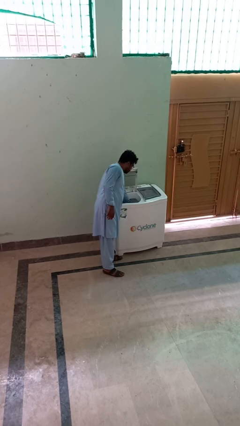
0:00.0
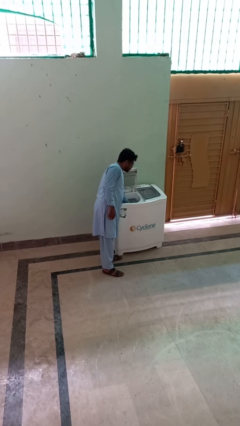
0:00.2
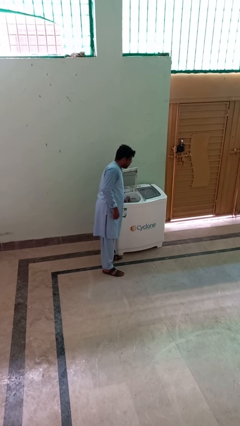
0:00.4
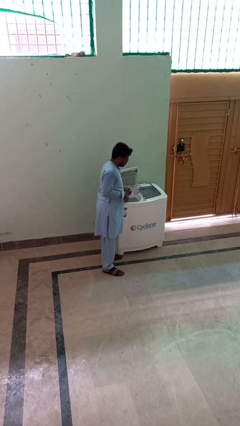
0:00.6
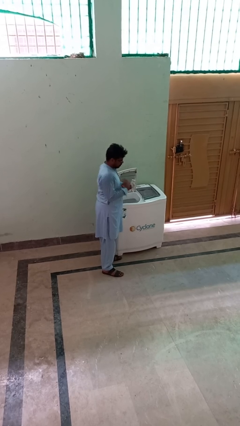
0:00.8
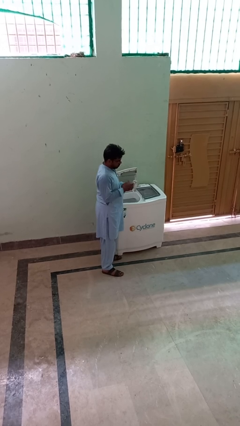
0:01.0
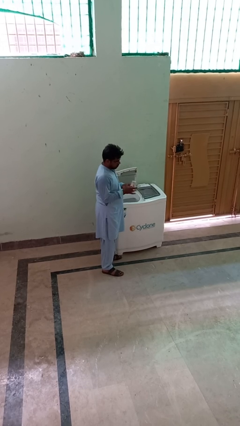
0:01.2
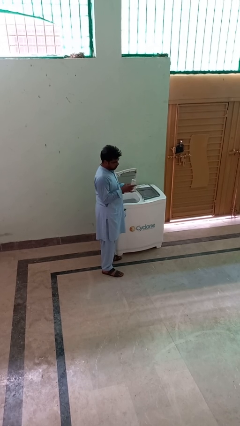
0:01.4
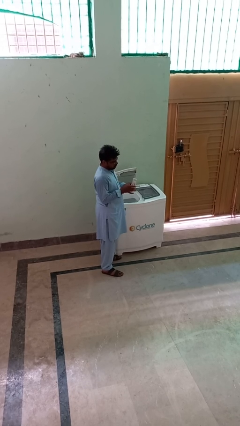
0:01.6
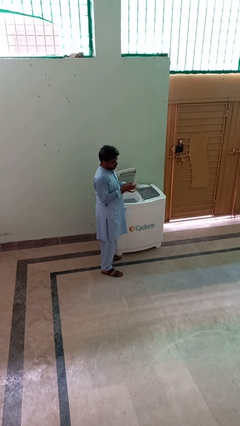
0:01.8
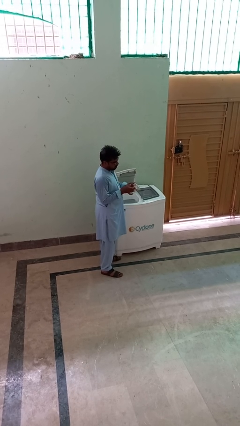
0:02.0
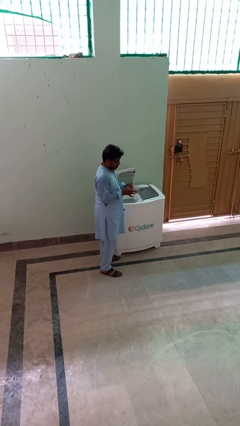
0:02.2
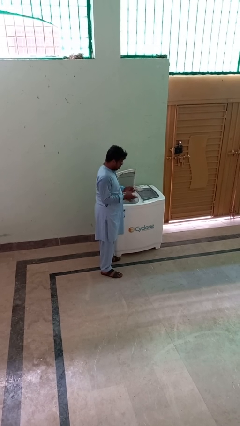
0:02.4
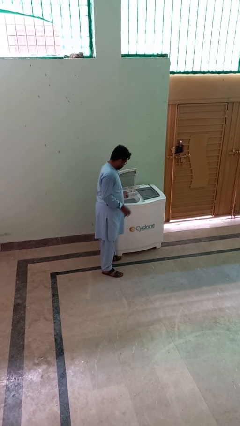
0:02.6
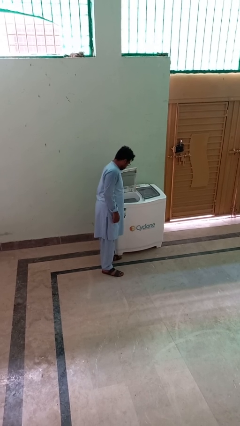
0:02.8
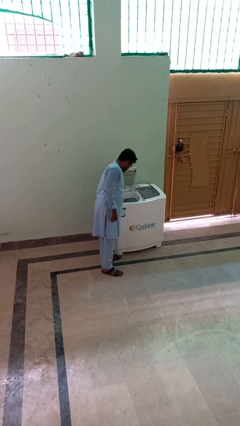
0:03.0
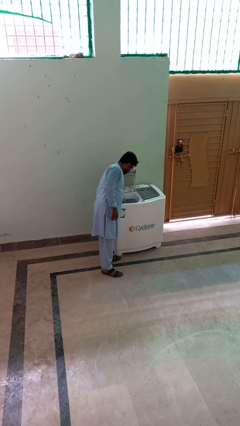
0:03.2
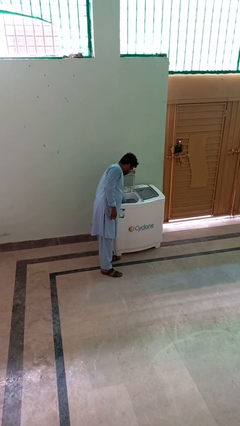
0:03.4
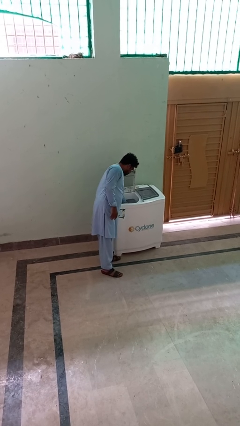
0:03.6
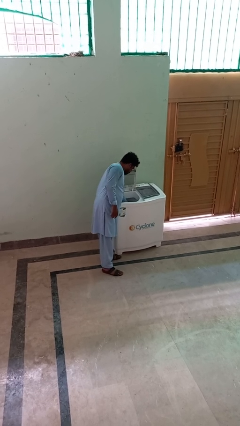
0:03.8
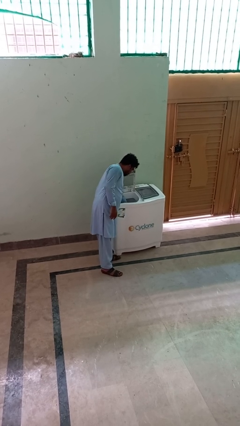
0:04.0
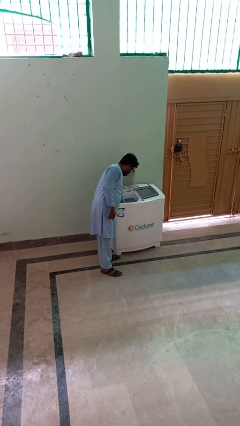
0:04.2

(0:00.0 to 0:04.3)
person cleans dryer lint trap

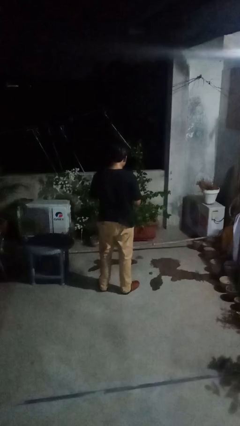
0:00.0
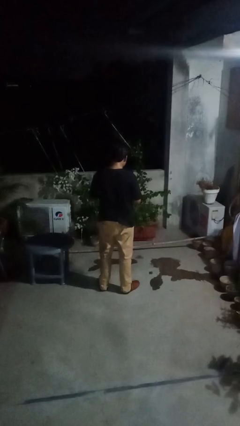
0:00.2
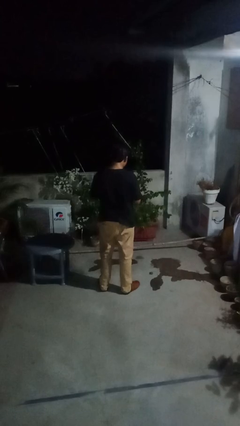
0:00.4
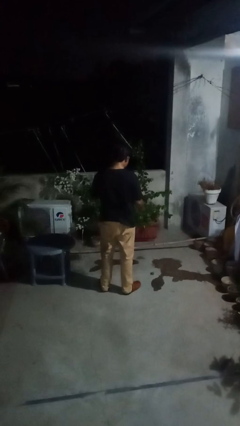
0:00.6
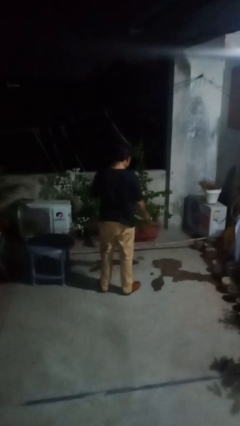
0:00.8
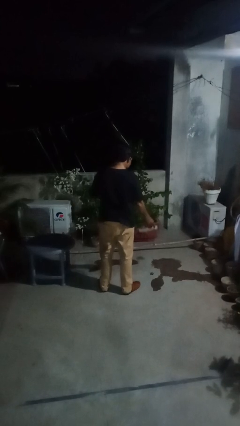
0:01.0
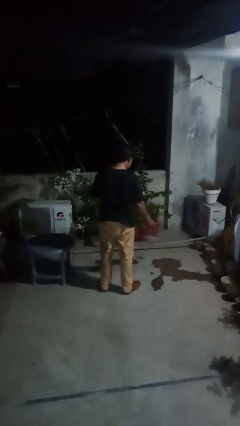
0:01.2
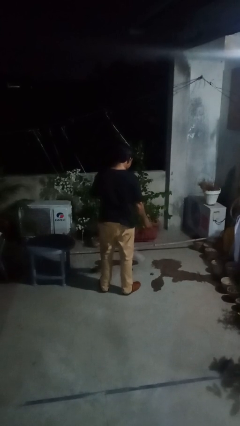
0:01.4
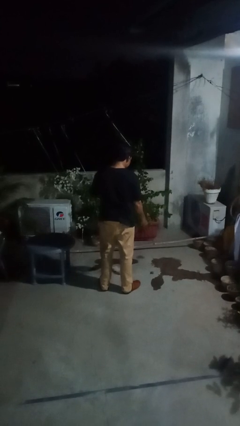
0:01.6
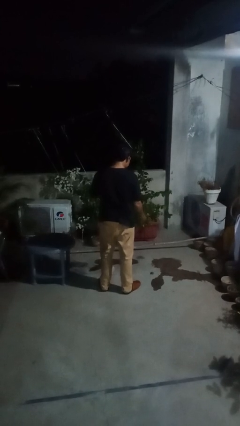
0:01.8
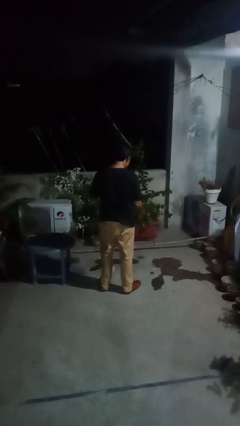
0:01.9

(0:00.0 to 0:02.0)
person tears paper

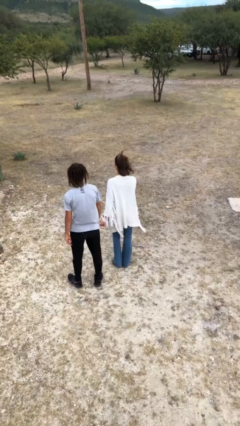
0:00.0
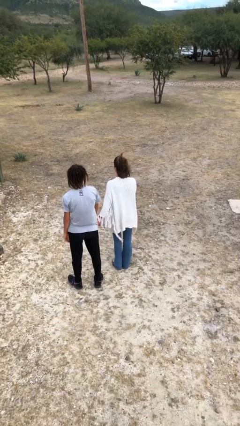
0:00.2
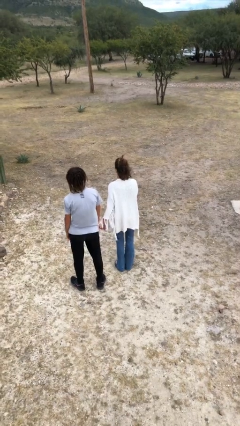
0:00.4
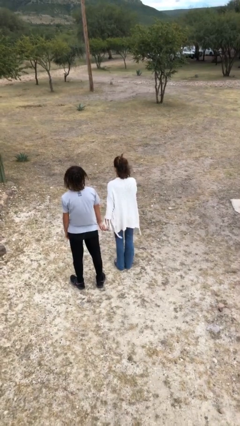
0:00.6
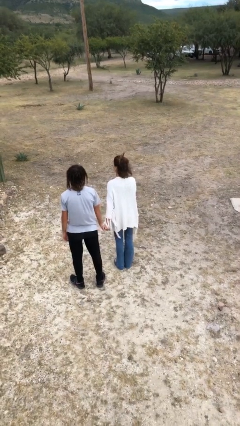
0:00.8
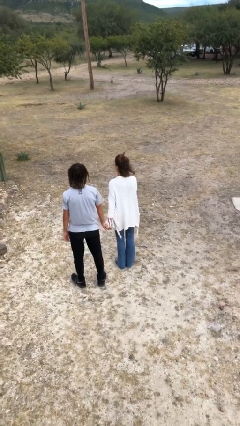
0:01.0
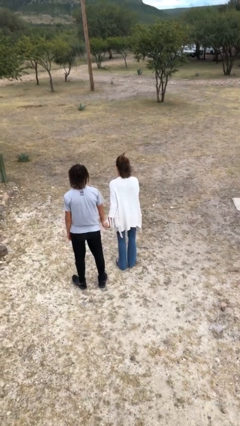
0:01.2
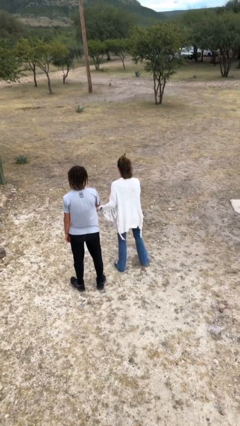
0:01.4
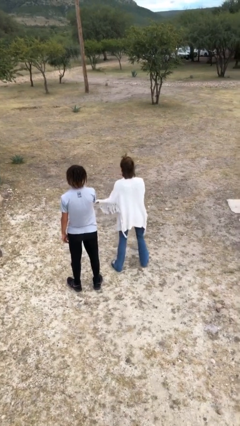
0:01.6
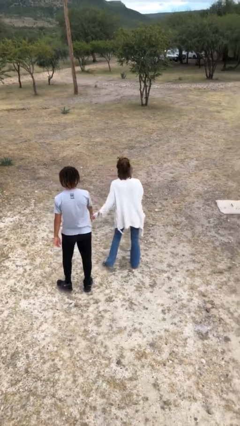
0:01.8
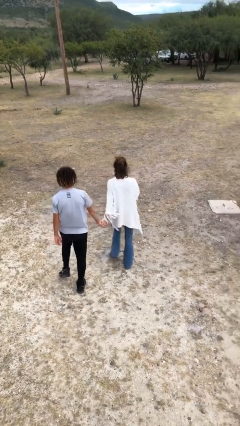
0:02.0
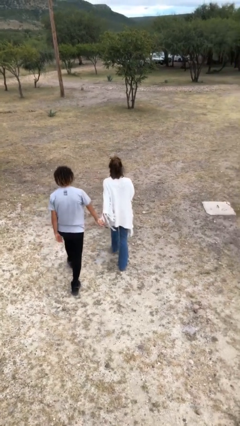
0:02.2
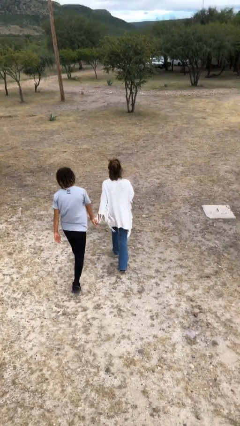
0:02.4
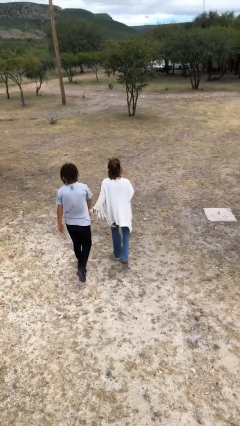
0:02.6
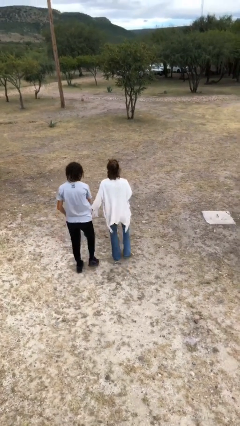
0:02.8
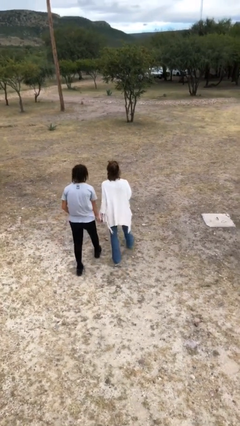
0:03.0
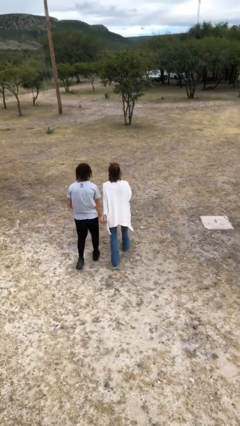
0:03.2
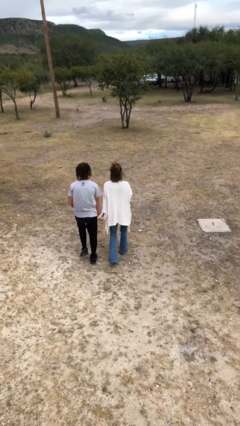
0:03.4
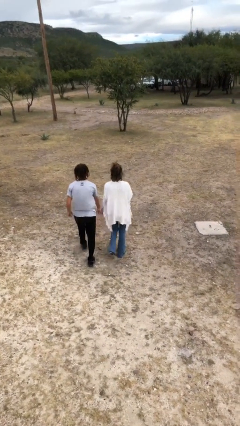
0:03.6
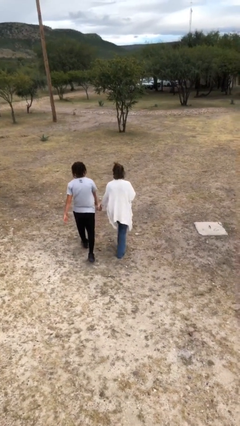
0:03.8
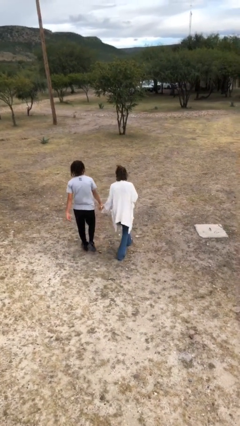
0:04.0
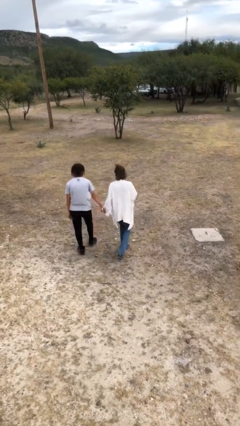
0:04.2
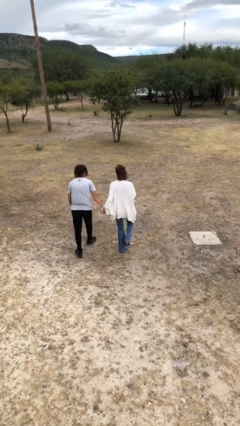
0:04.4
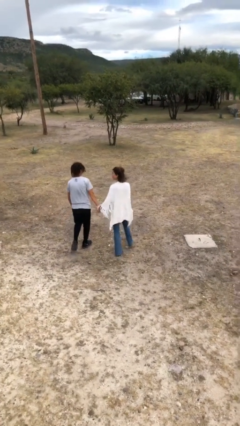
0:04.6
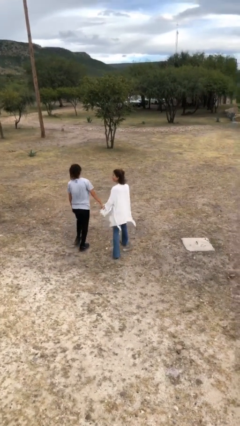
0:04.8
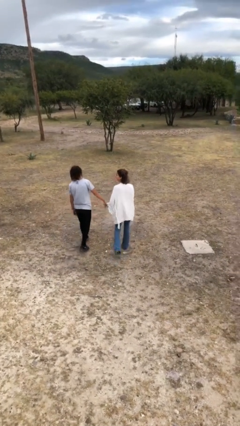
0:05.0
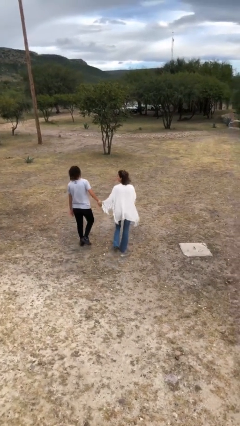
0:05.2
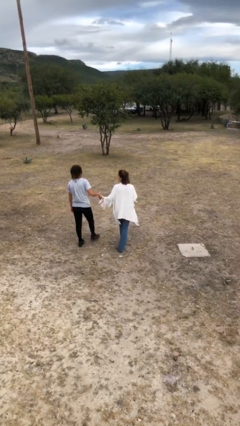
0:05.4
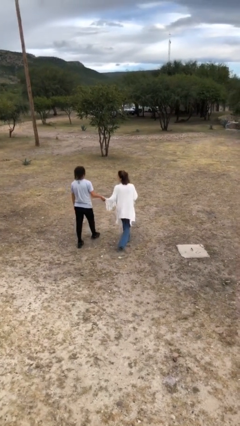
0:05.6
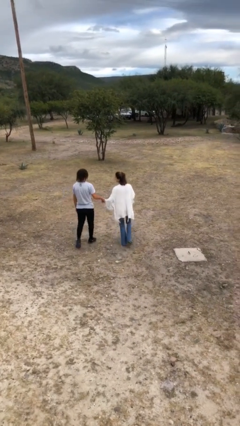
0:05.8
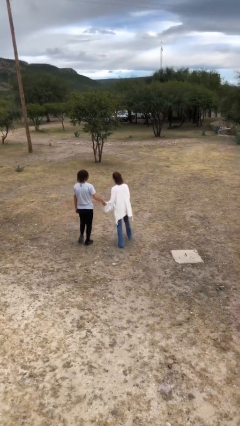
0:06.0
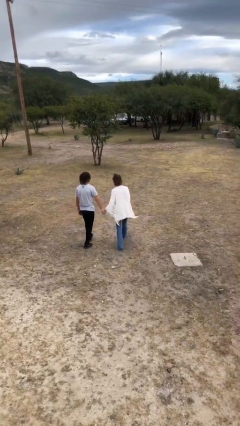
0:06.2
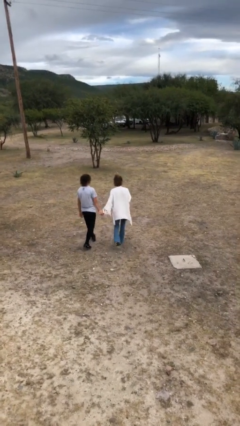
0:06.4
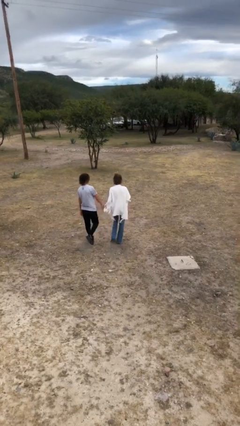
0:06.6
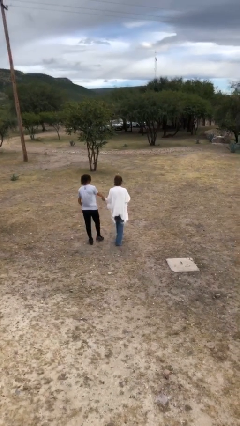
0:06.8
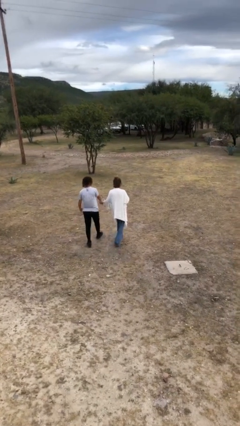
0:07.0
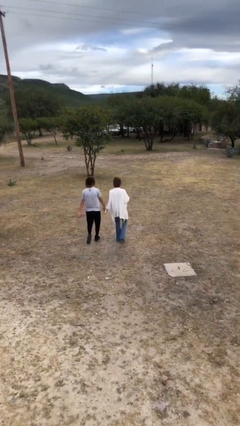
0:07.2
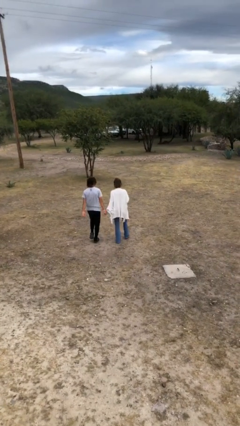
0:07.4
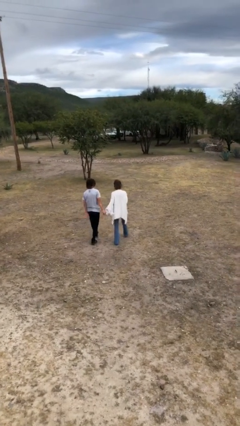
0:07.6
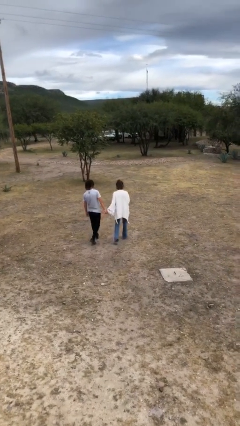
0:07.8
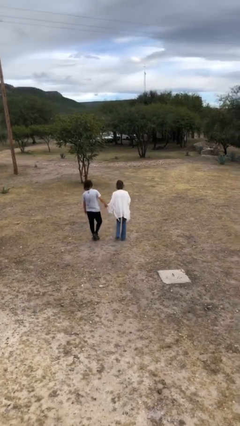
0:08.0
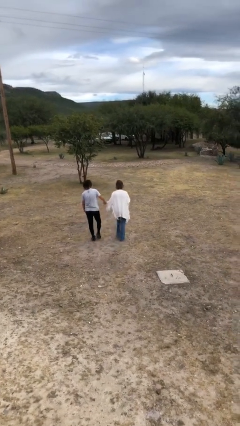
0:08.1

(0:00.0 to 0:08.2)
person holds hand

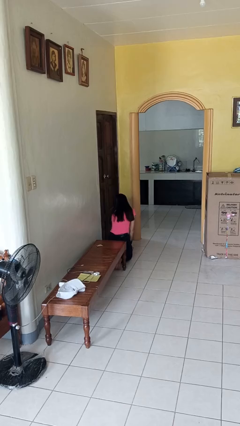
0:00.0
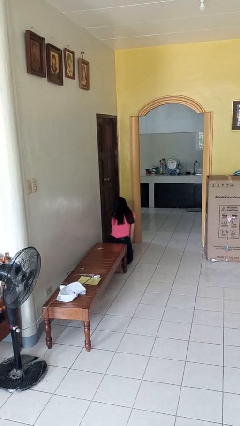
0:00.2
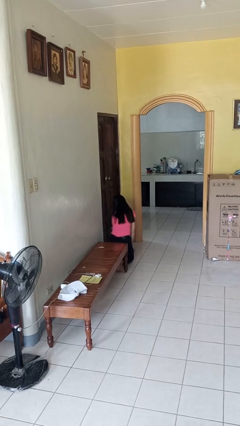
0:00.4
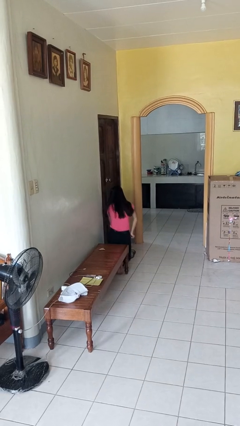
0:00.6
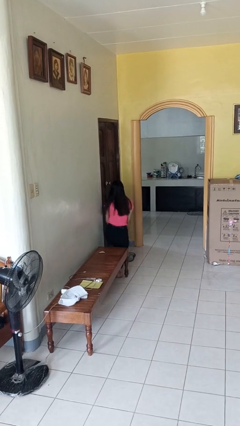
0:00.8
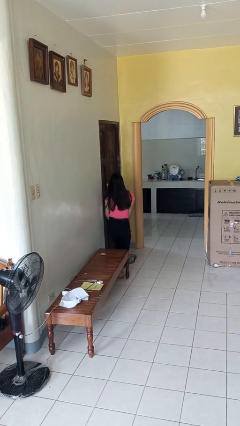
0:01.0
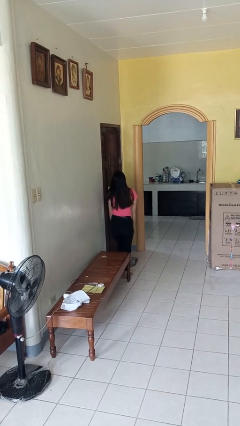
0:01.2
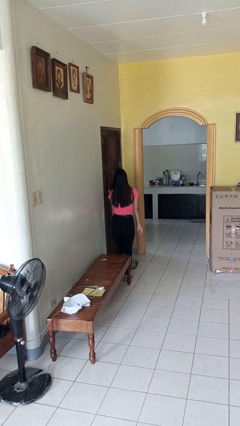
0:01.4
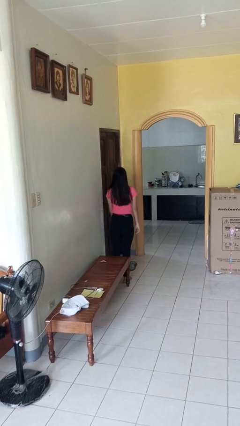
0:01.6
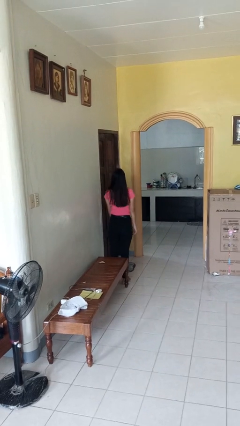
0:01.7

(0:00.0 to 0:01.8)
person stands up from floor

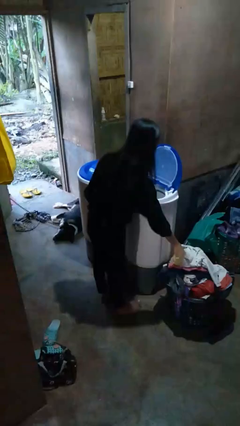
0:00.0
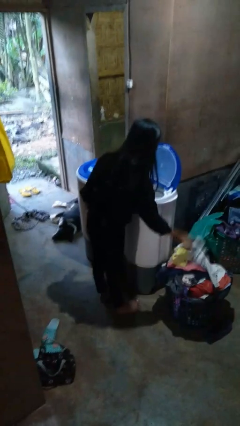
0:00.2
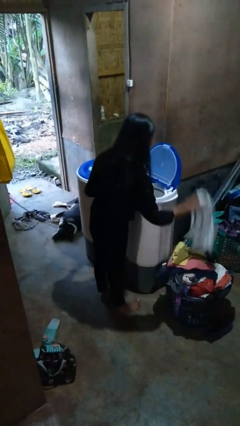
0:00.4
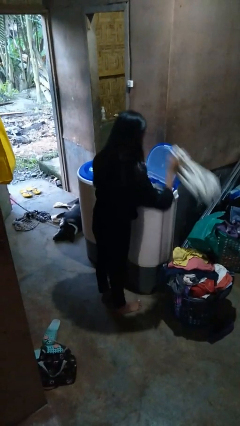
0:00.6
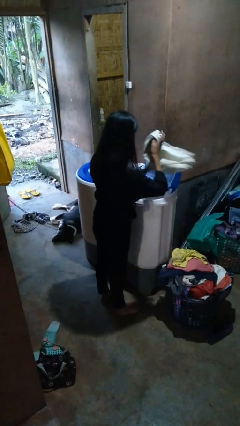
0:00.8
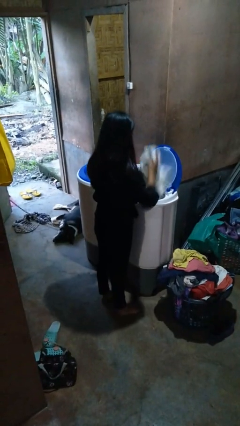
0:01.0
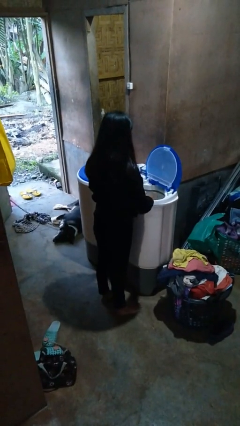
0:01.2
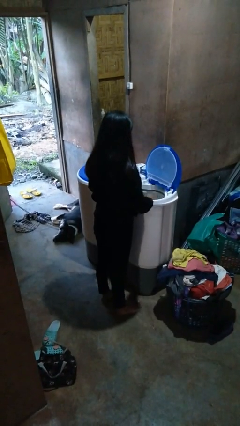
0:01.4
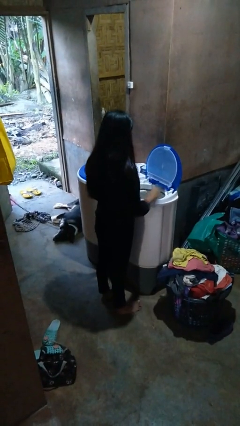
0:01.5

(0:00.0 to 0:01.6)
person loads dryer
